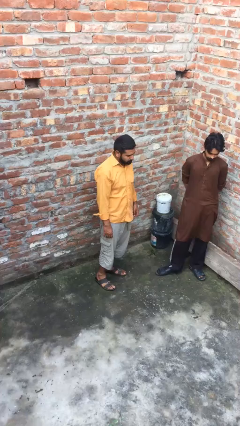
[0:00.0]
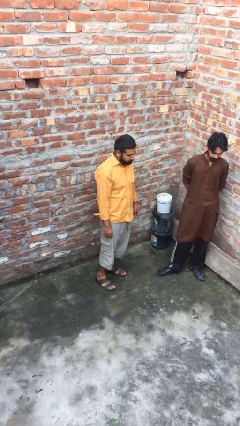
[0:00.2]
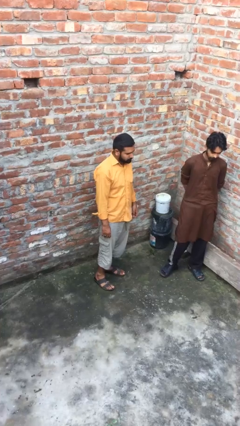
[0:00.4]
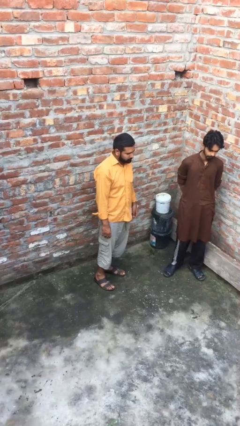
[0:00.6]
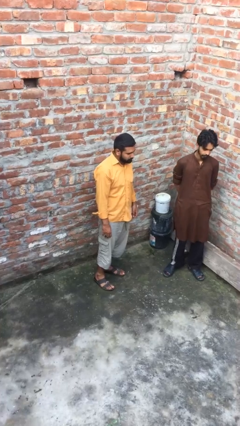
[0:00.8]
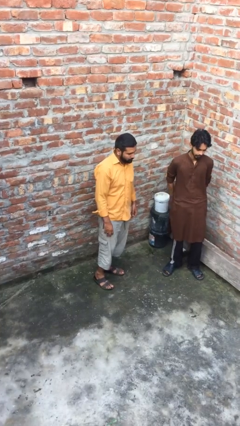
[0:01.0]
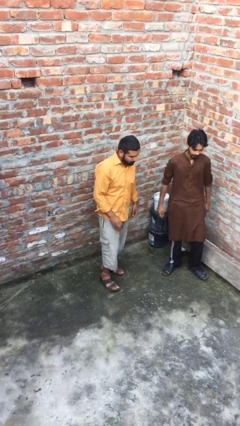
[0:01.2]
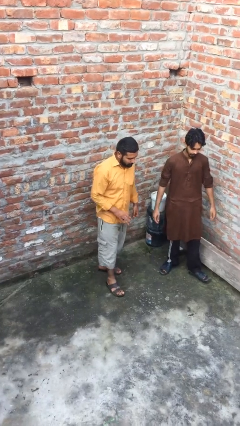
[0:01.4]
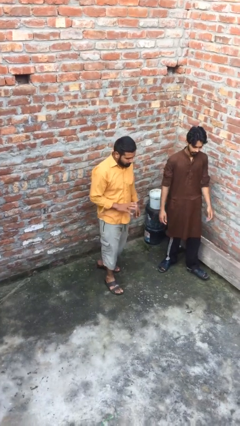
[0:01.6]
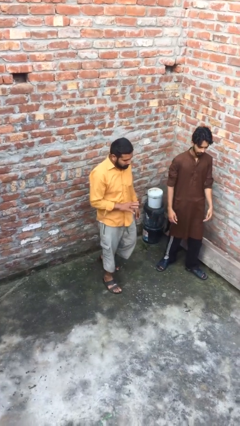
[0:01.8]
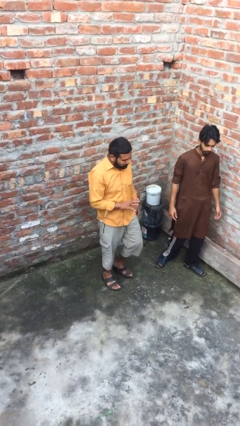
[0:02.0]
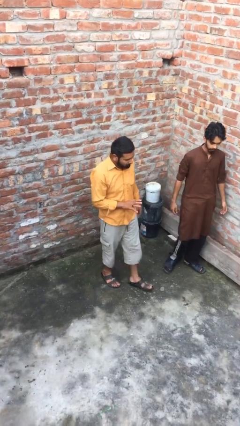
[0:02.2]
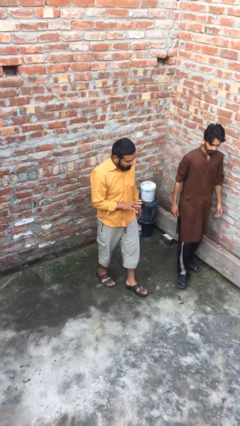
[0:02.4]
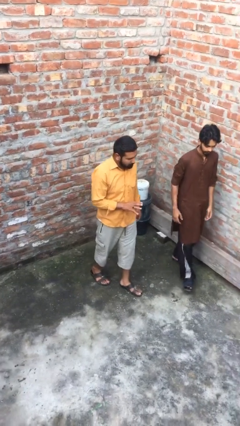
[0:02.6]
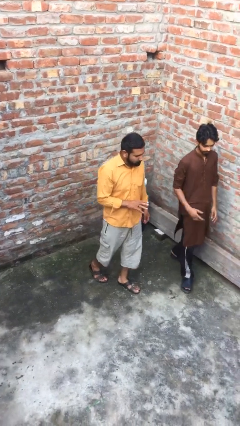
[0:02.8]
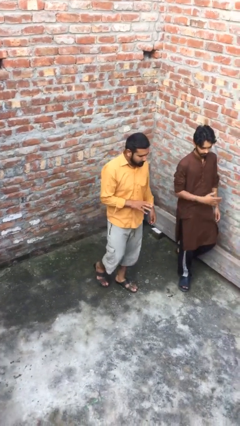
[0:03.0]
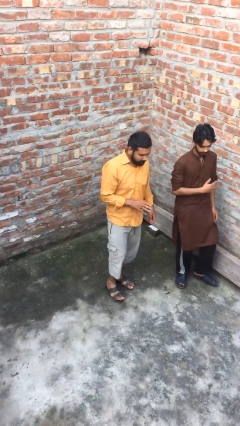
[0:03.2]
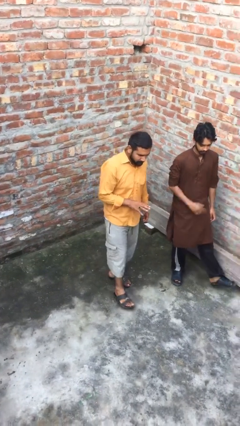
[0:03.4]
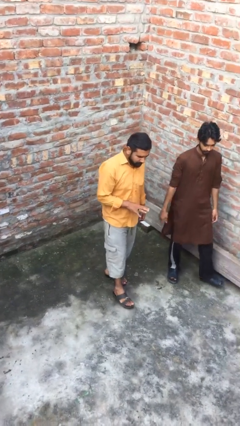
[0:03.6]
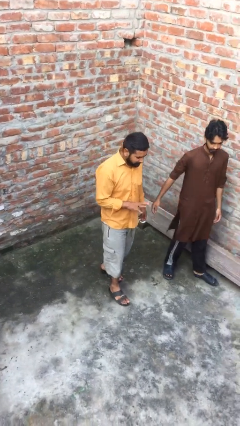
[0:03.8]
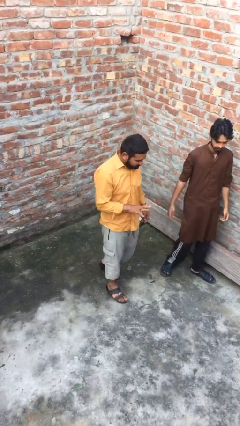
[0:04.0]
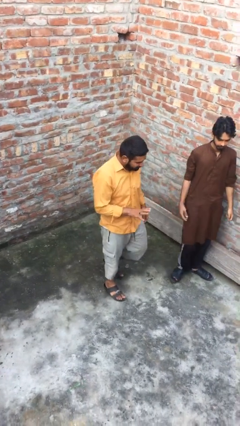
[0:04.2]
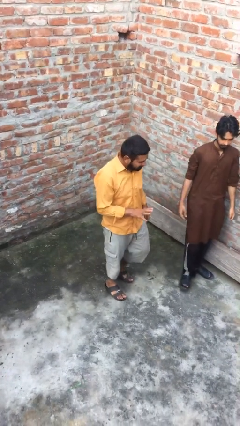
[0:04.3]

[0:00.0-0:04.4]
person talks to person

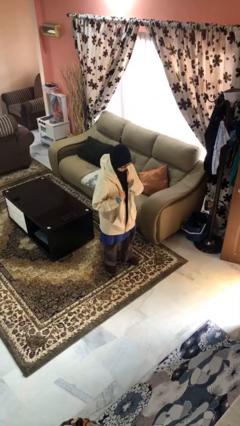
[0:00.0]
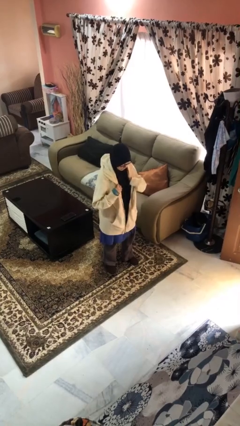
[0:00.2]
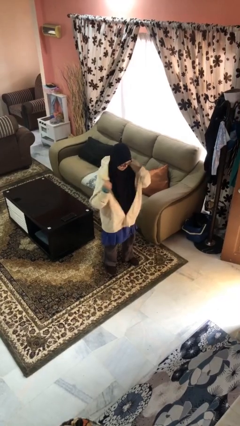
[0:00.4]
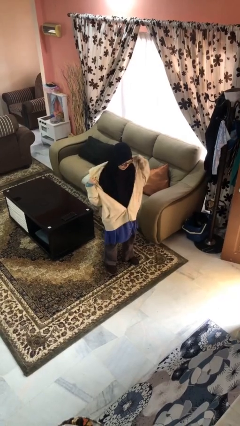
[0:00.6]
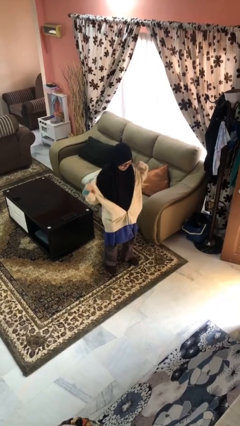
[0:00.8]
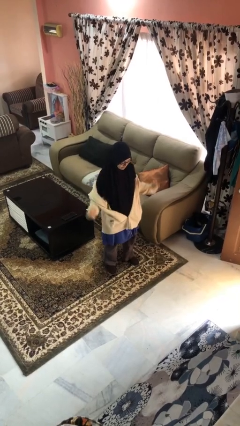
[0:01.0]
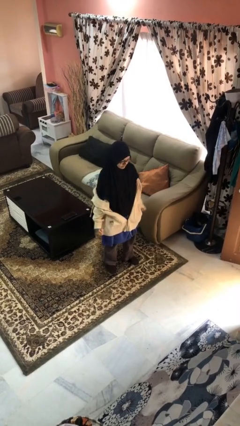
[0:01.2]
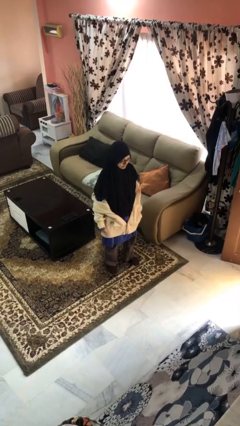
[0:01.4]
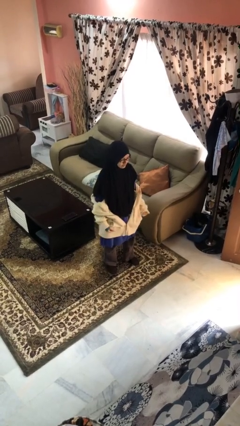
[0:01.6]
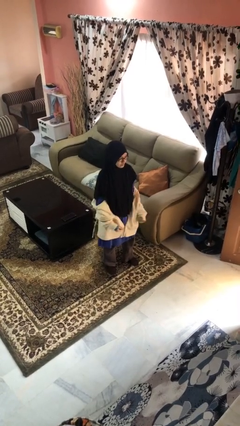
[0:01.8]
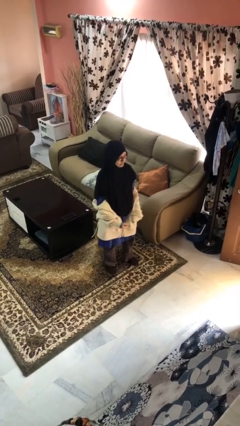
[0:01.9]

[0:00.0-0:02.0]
person takes off jacket

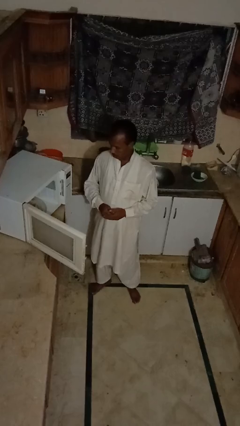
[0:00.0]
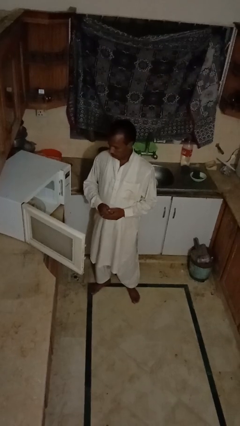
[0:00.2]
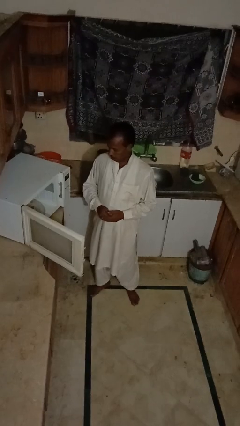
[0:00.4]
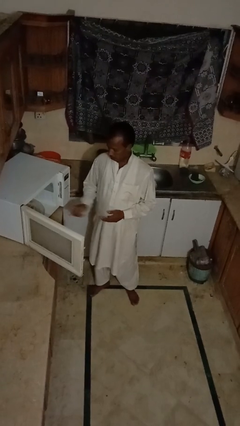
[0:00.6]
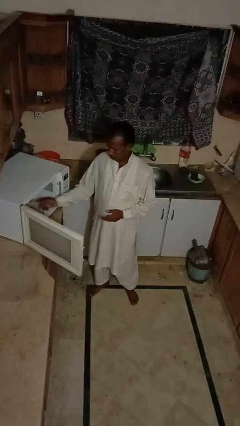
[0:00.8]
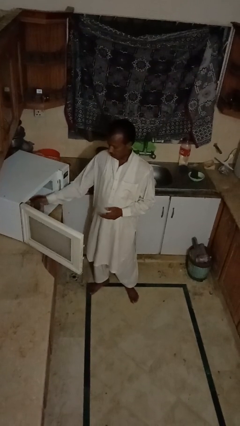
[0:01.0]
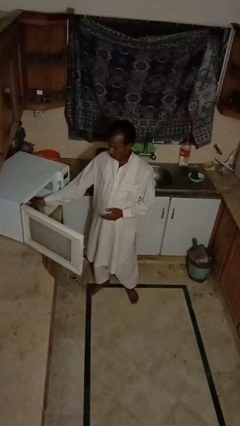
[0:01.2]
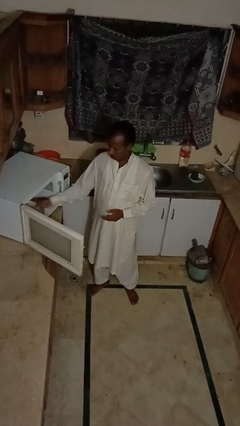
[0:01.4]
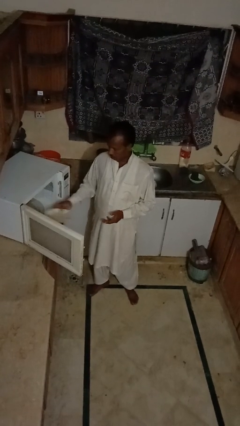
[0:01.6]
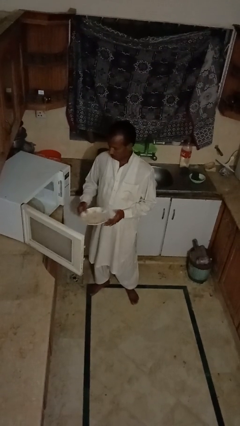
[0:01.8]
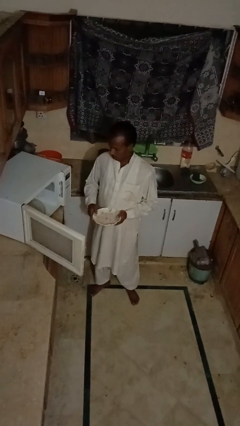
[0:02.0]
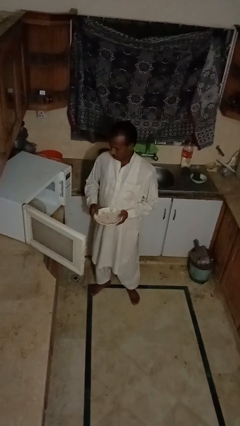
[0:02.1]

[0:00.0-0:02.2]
person takes object from microwave

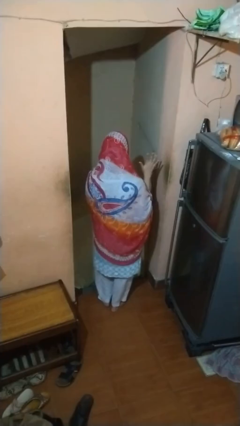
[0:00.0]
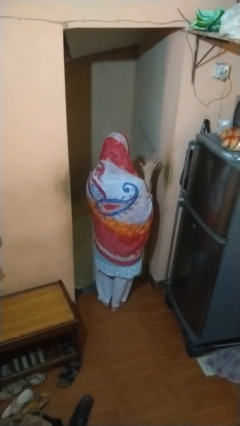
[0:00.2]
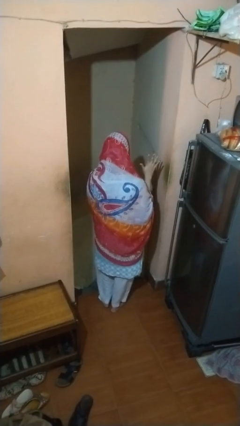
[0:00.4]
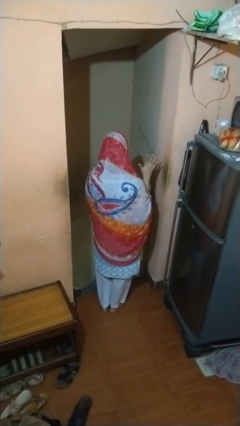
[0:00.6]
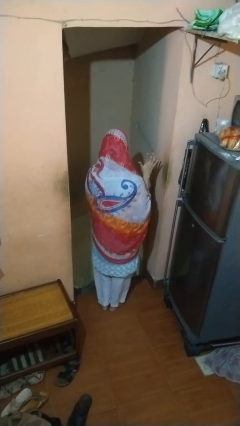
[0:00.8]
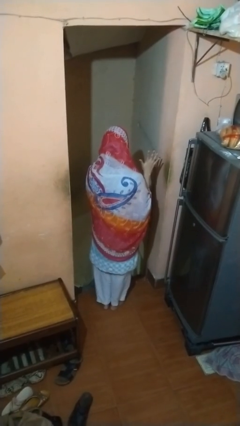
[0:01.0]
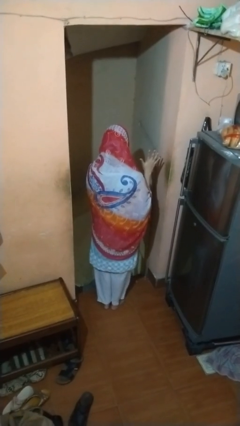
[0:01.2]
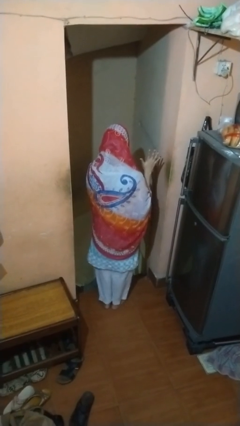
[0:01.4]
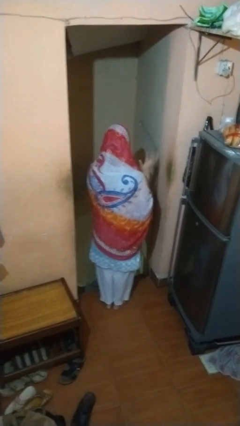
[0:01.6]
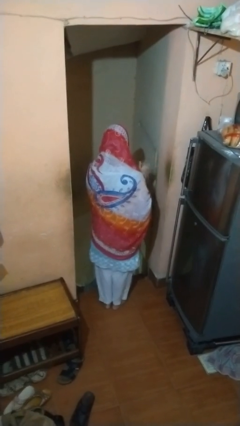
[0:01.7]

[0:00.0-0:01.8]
person gestures number five

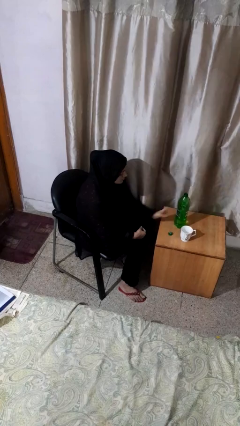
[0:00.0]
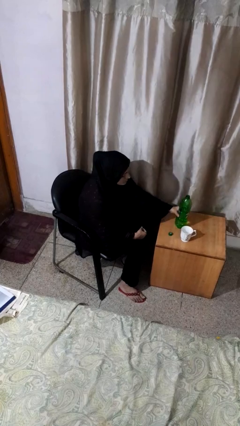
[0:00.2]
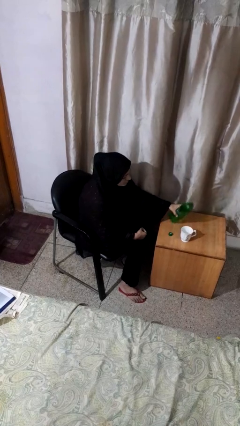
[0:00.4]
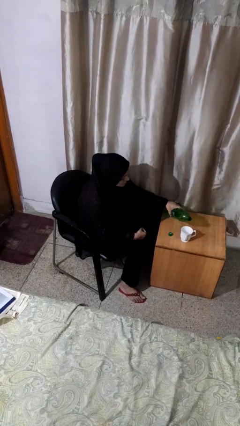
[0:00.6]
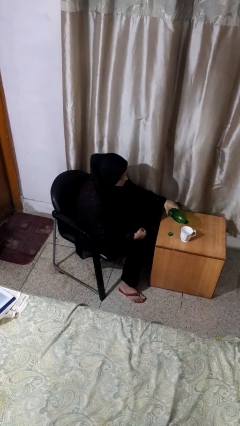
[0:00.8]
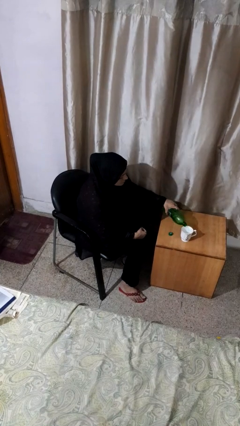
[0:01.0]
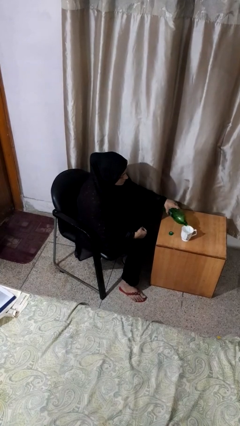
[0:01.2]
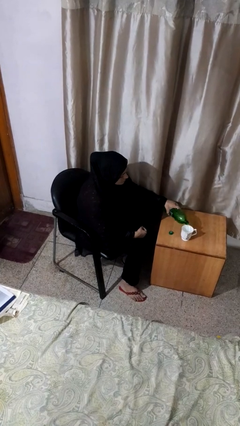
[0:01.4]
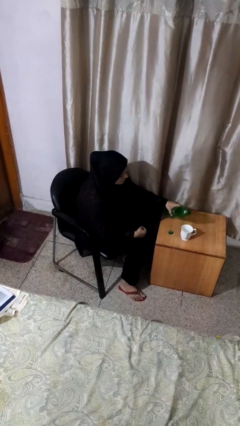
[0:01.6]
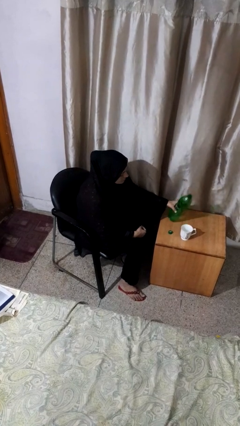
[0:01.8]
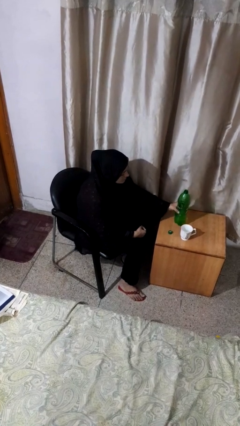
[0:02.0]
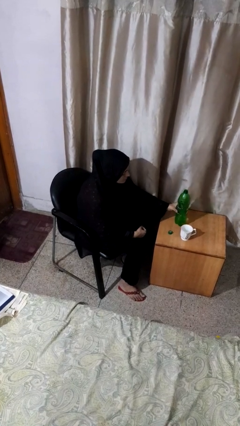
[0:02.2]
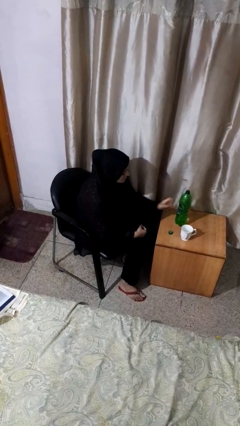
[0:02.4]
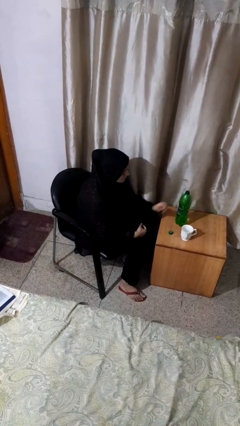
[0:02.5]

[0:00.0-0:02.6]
person pours liquid into cup

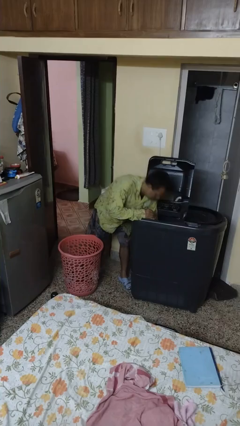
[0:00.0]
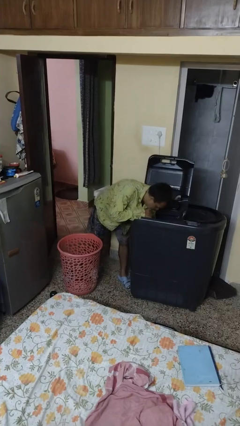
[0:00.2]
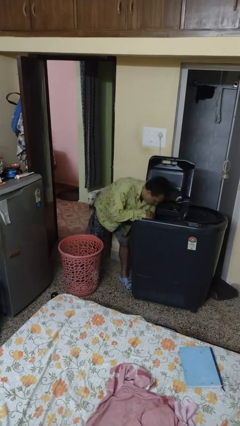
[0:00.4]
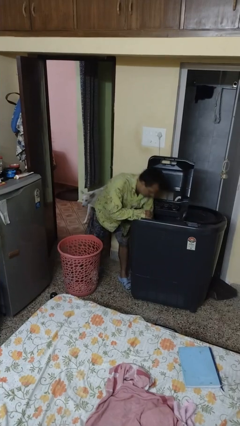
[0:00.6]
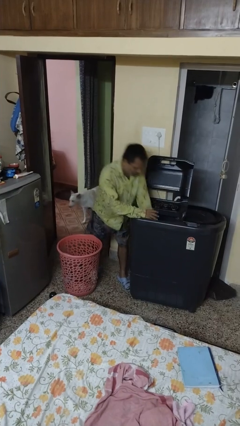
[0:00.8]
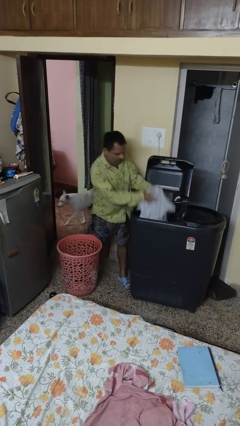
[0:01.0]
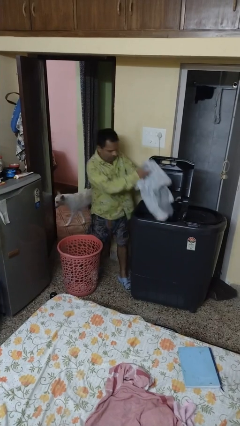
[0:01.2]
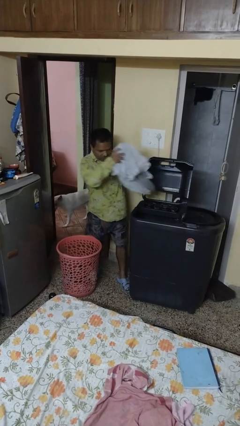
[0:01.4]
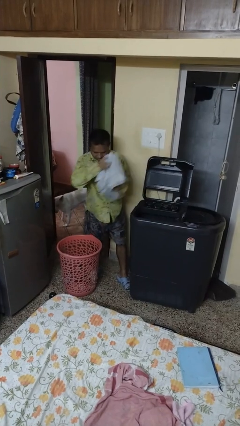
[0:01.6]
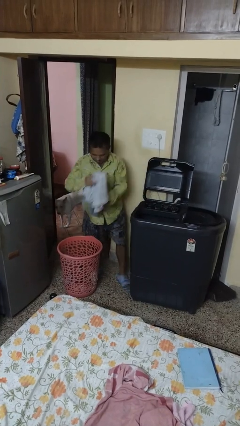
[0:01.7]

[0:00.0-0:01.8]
person unloads clotheswasher

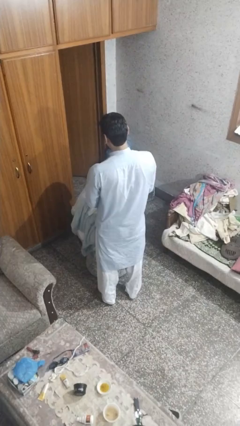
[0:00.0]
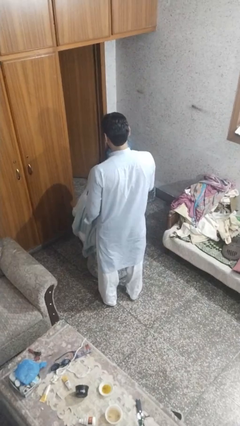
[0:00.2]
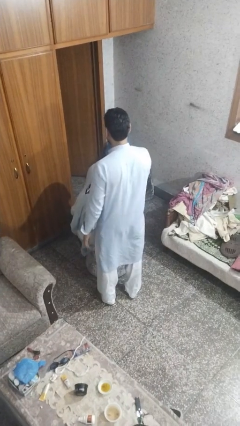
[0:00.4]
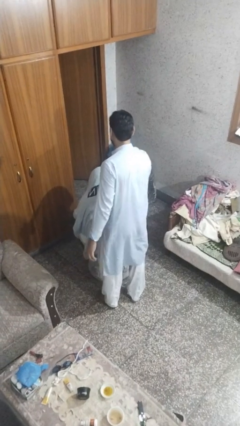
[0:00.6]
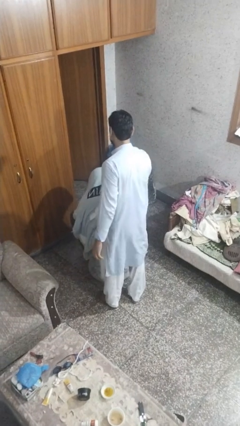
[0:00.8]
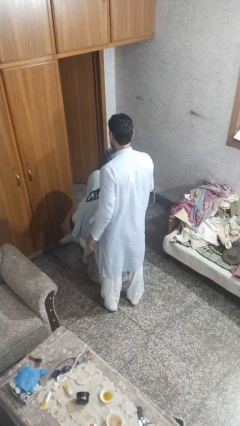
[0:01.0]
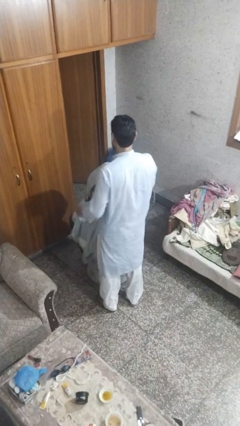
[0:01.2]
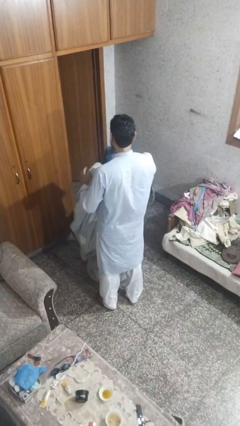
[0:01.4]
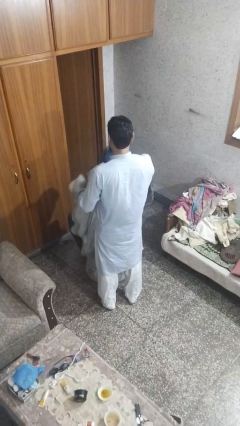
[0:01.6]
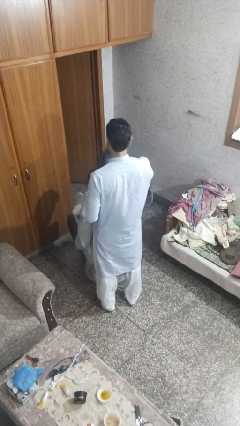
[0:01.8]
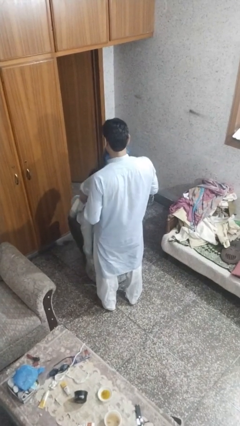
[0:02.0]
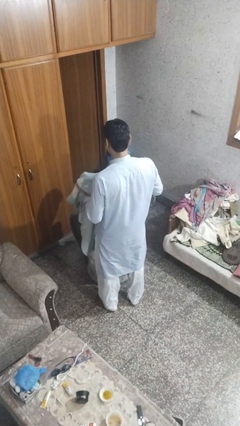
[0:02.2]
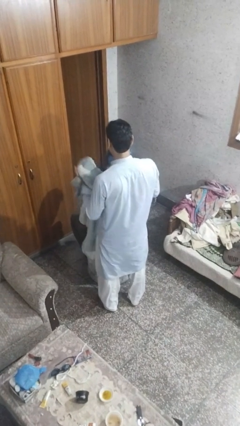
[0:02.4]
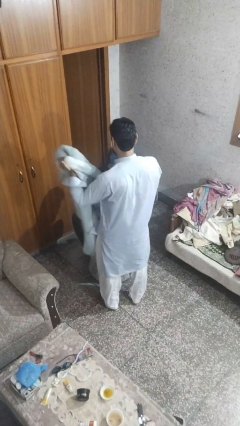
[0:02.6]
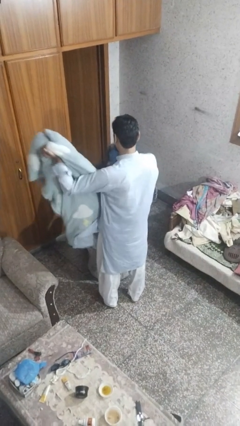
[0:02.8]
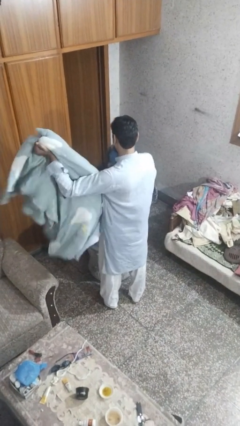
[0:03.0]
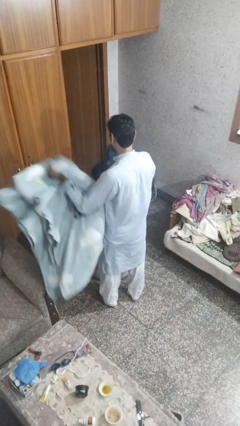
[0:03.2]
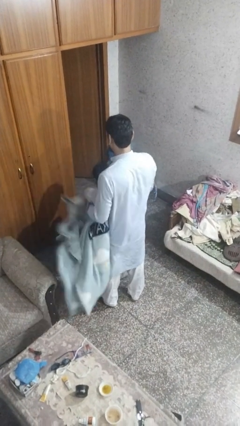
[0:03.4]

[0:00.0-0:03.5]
person uncovers friend with blanket
